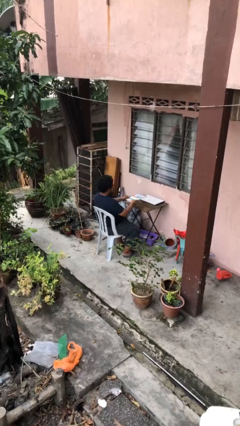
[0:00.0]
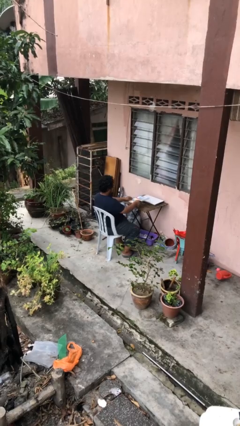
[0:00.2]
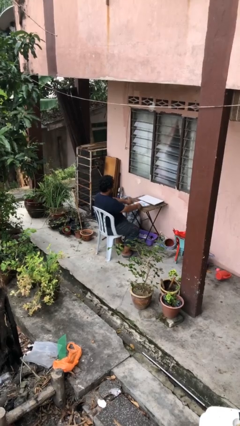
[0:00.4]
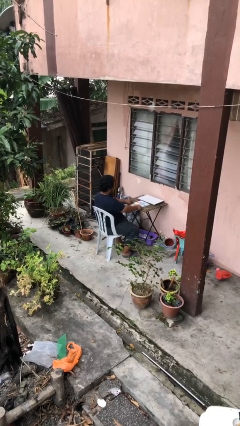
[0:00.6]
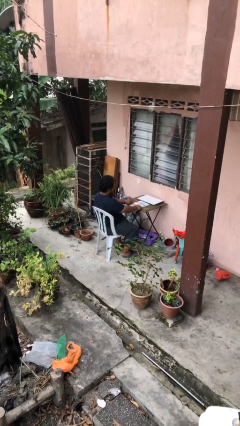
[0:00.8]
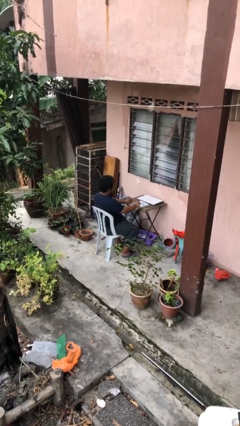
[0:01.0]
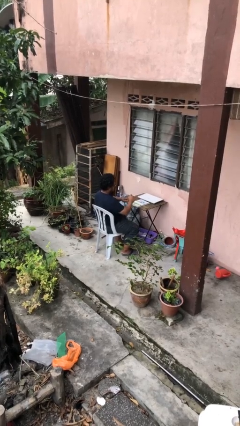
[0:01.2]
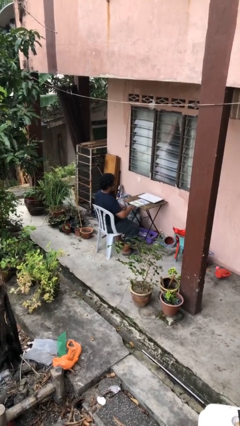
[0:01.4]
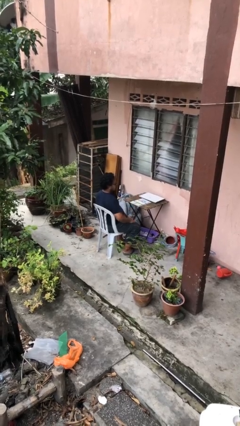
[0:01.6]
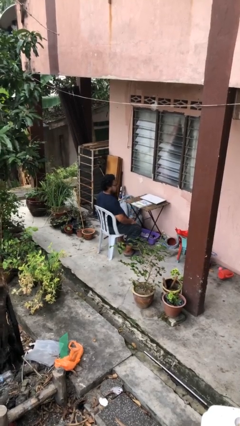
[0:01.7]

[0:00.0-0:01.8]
person puts down object on table

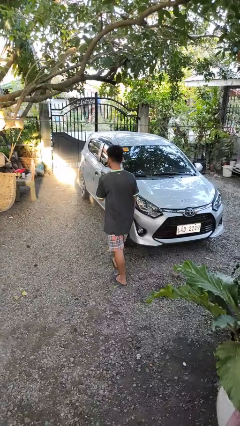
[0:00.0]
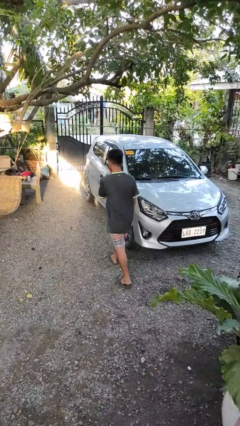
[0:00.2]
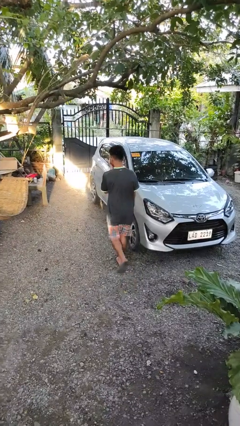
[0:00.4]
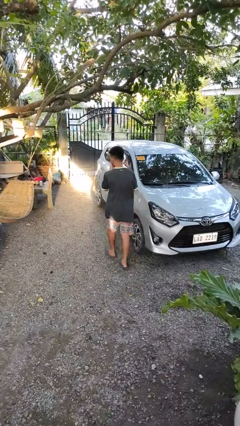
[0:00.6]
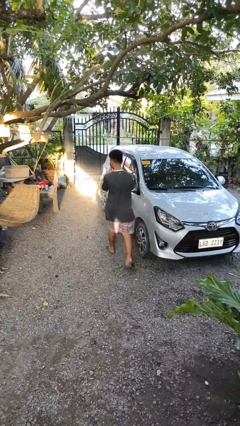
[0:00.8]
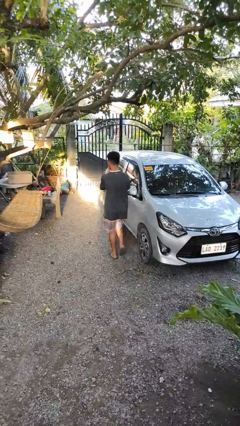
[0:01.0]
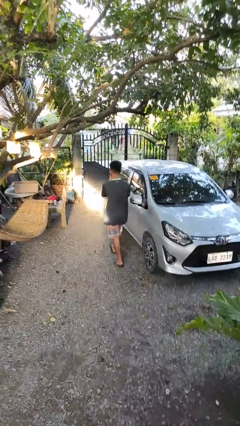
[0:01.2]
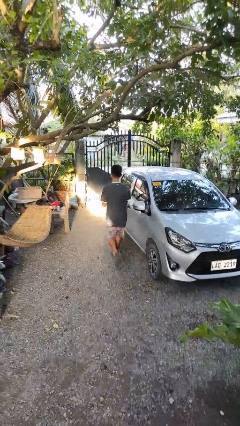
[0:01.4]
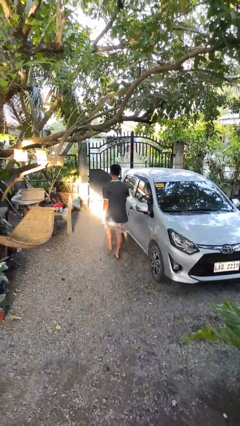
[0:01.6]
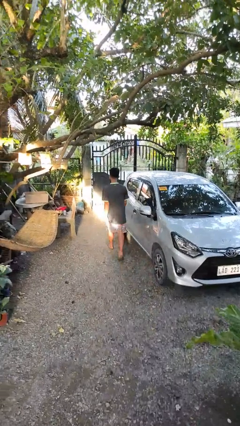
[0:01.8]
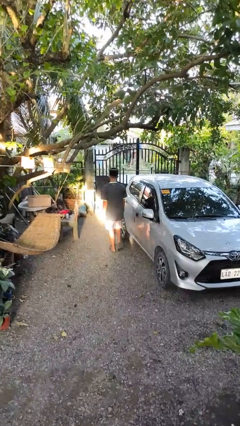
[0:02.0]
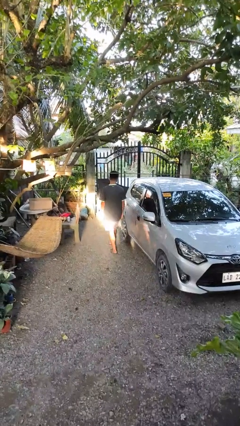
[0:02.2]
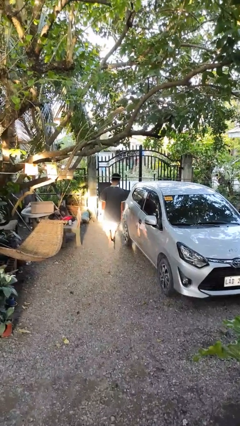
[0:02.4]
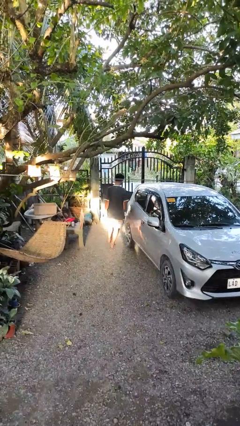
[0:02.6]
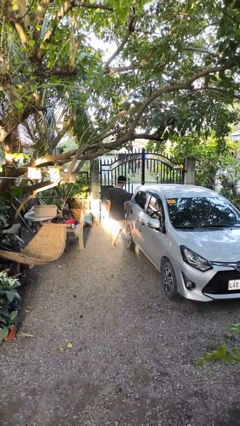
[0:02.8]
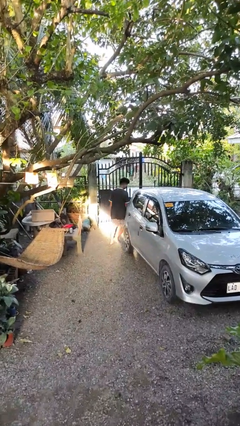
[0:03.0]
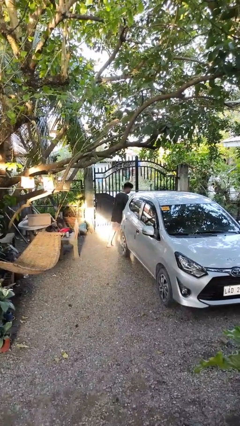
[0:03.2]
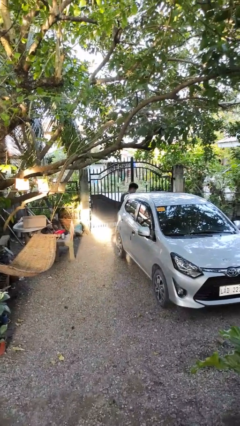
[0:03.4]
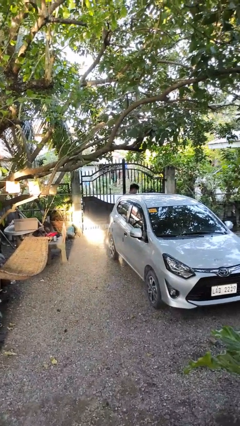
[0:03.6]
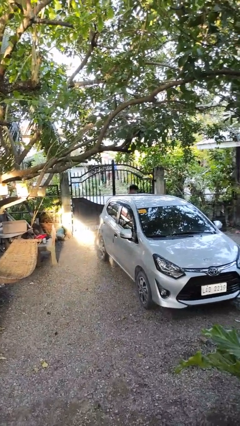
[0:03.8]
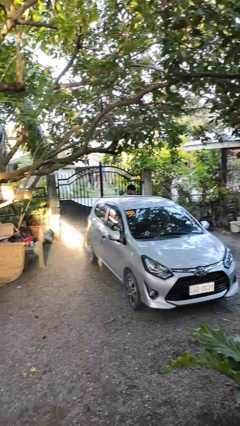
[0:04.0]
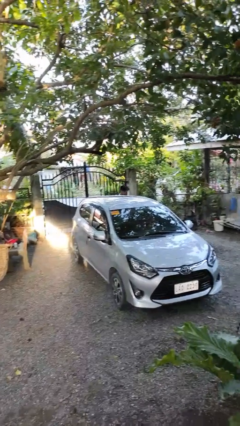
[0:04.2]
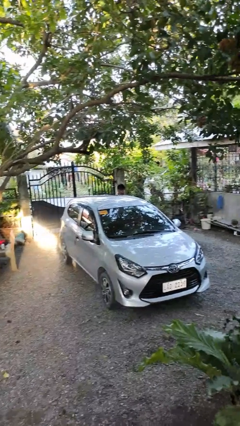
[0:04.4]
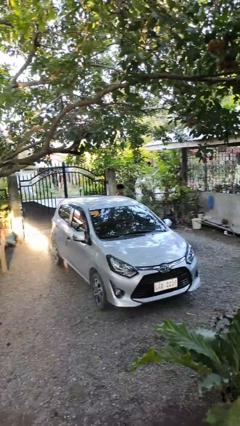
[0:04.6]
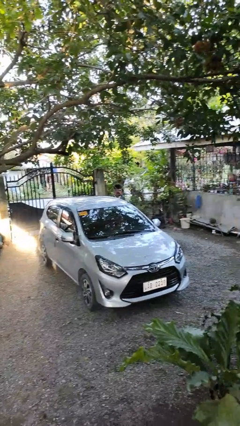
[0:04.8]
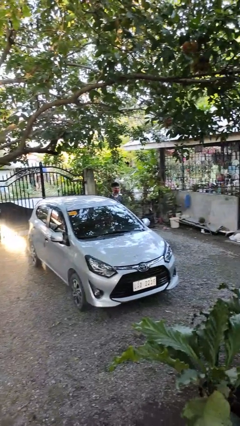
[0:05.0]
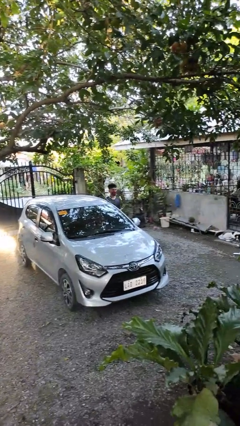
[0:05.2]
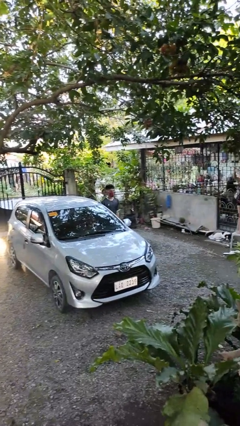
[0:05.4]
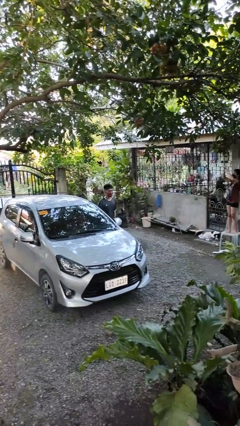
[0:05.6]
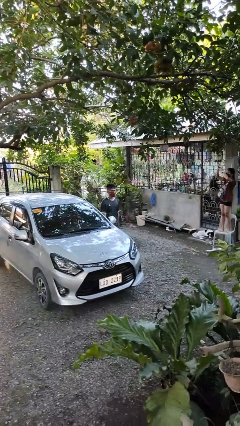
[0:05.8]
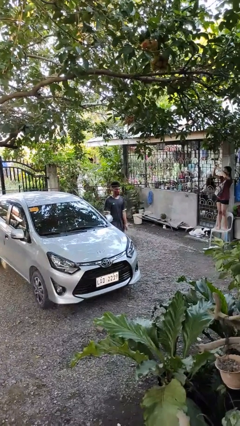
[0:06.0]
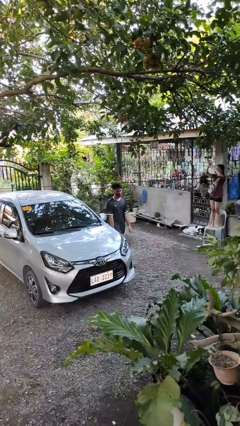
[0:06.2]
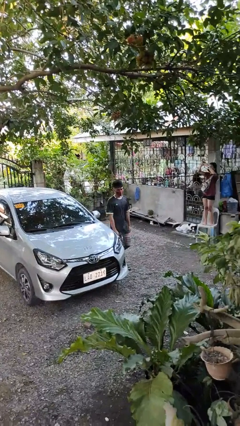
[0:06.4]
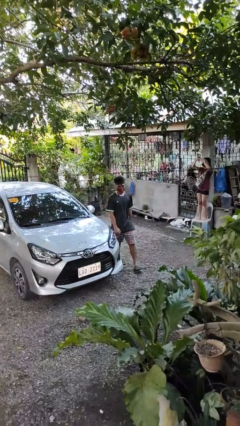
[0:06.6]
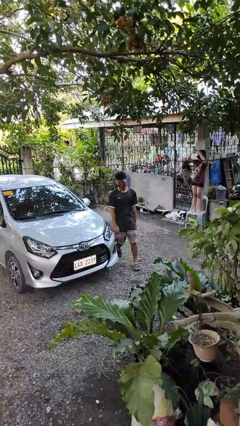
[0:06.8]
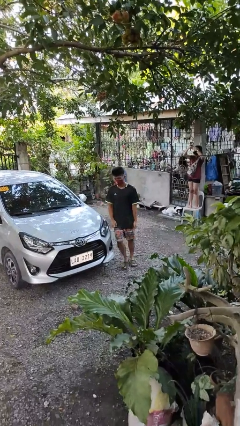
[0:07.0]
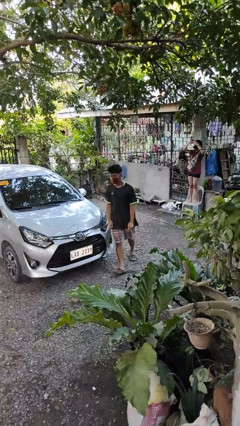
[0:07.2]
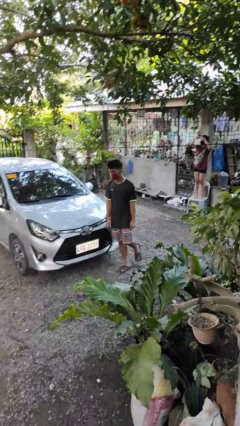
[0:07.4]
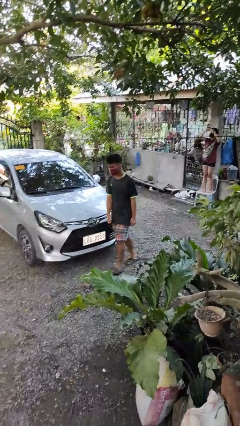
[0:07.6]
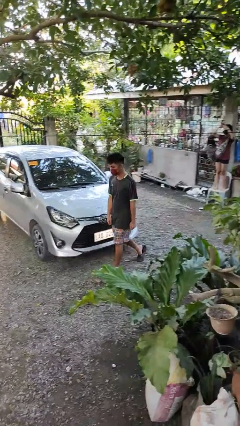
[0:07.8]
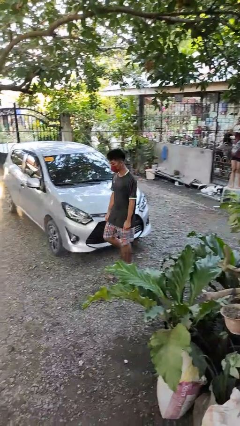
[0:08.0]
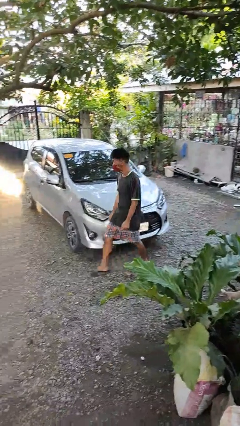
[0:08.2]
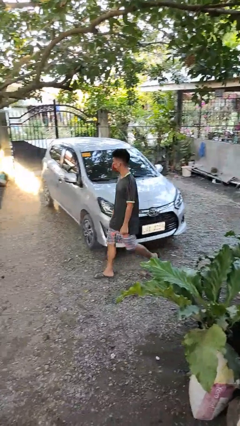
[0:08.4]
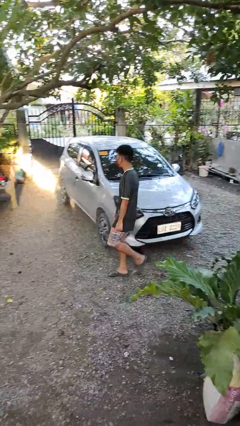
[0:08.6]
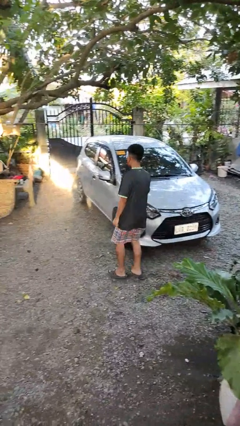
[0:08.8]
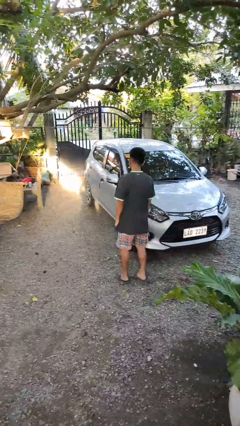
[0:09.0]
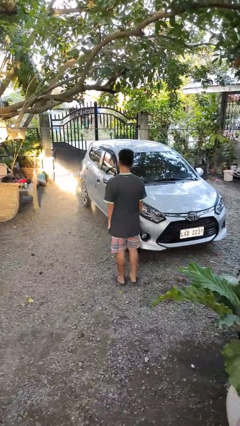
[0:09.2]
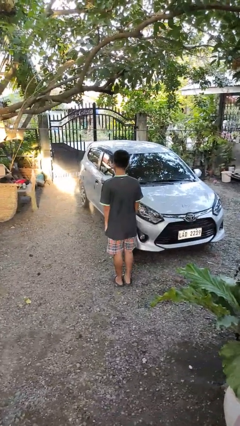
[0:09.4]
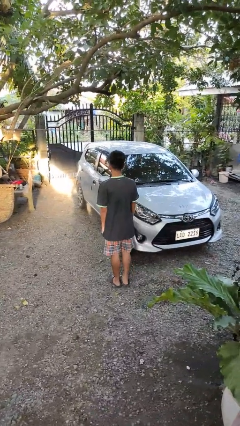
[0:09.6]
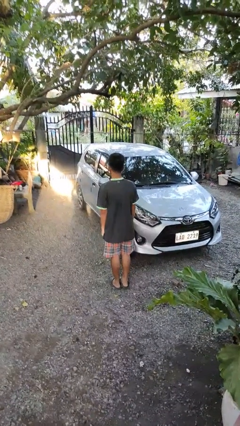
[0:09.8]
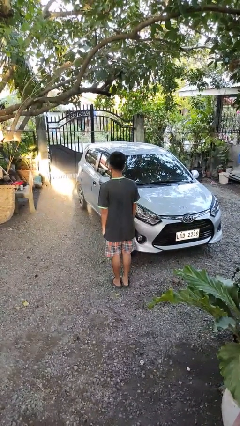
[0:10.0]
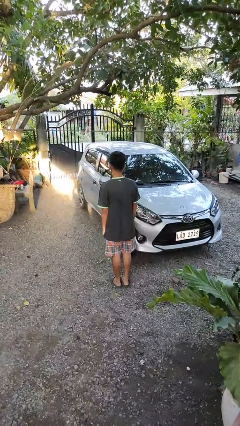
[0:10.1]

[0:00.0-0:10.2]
person walks around car

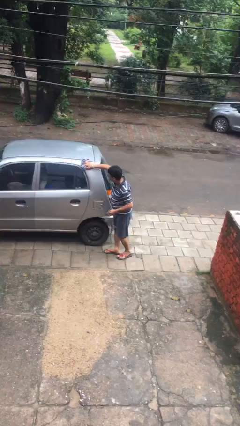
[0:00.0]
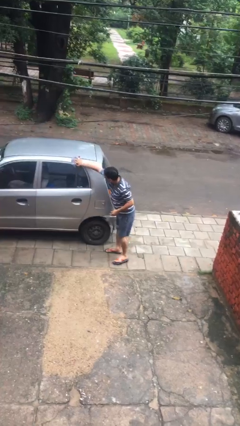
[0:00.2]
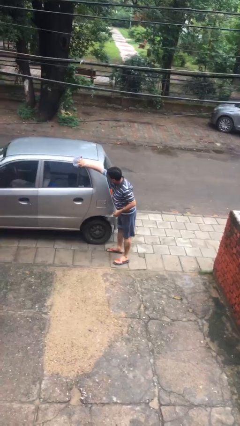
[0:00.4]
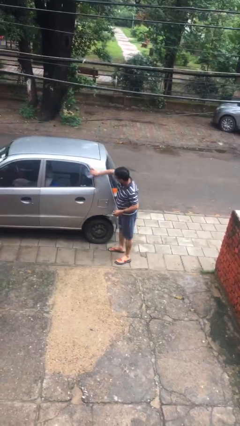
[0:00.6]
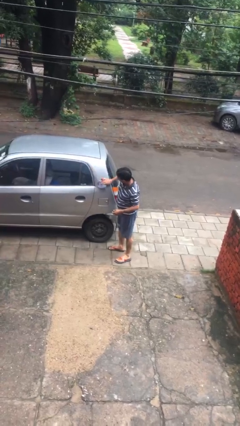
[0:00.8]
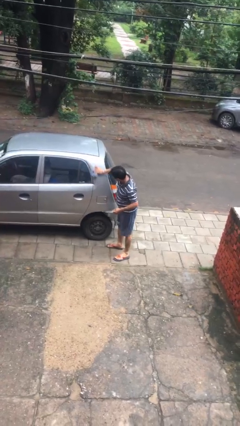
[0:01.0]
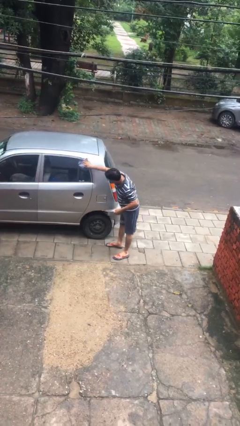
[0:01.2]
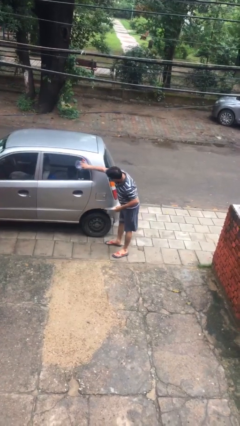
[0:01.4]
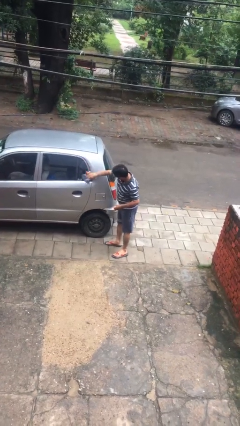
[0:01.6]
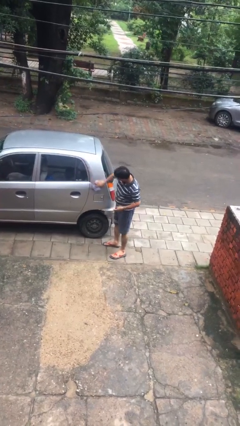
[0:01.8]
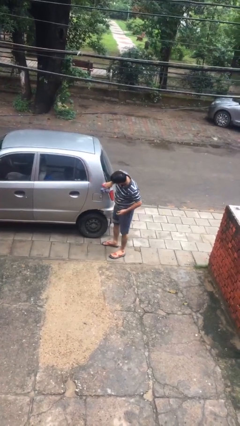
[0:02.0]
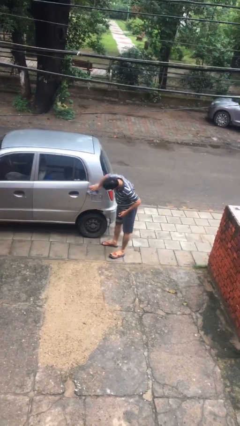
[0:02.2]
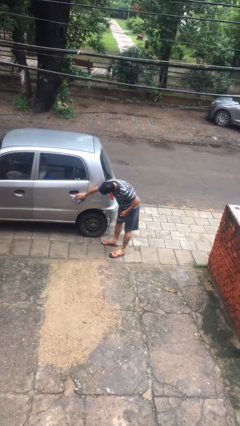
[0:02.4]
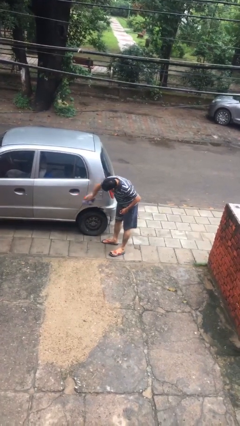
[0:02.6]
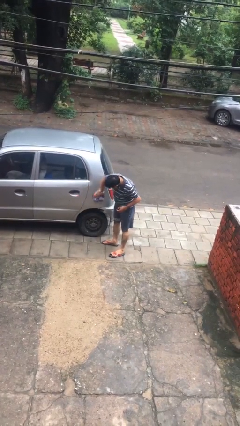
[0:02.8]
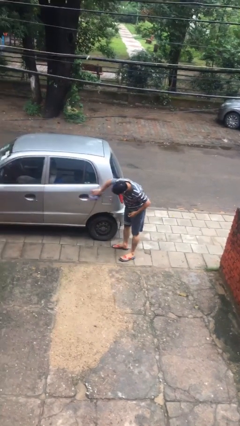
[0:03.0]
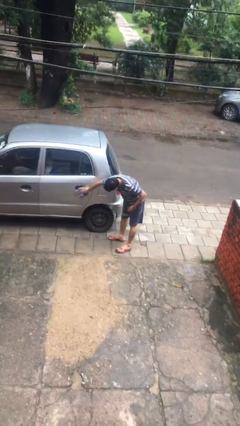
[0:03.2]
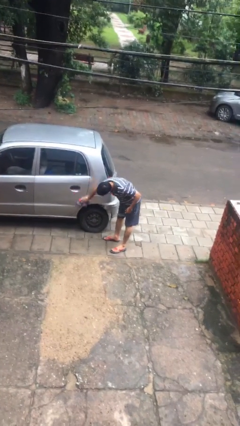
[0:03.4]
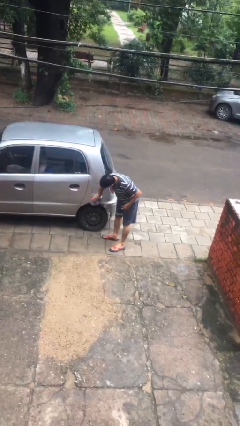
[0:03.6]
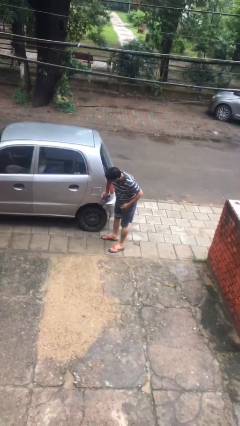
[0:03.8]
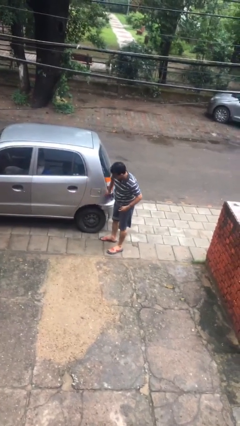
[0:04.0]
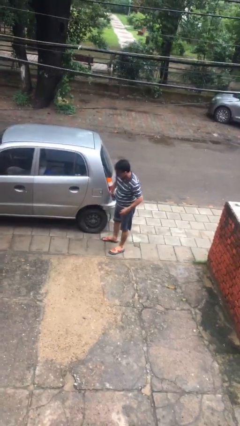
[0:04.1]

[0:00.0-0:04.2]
person polishes car with rag

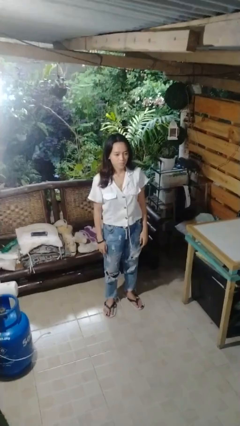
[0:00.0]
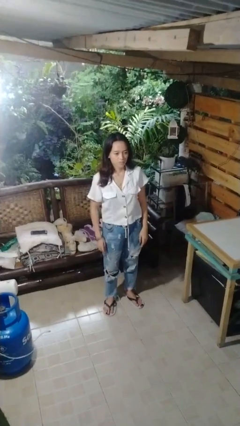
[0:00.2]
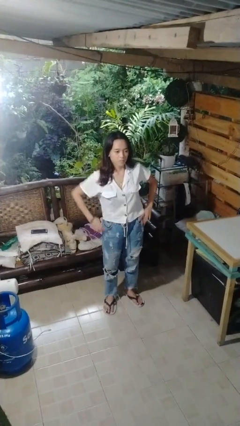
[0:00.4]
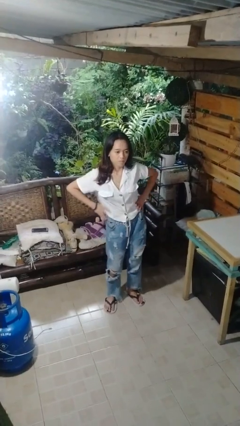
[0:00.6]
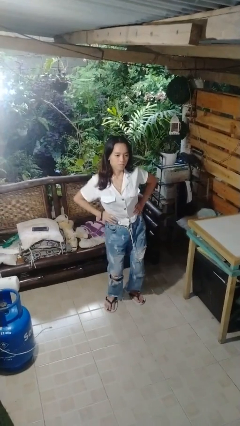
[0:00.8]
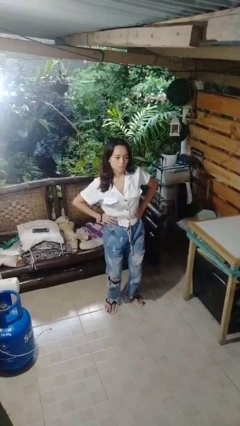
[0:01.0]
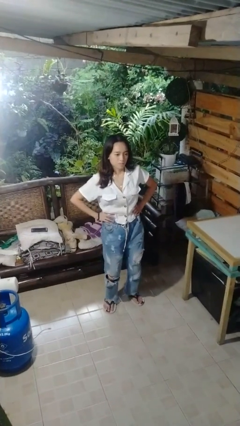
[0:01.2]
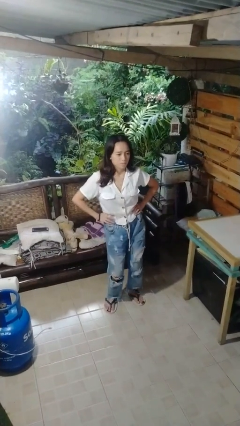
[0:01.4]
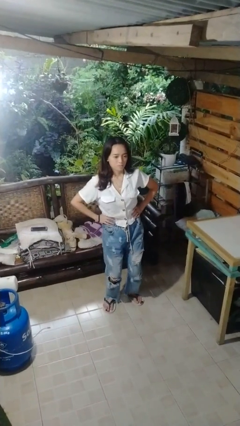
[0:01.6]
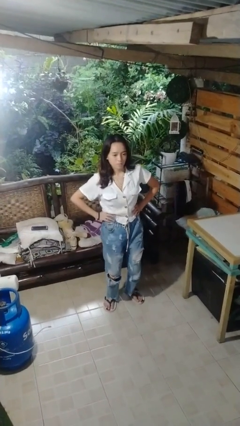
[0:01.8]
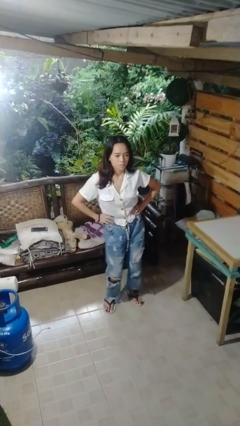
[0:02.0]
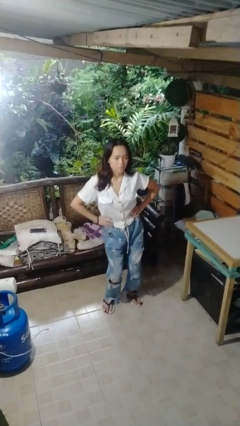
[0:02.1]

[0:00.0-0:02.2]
person wiggles hips
